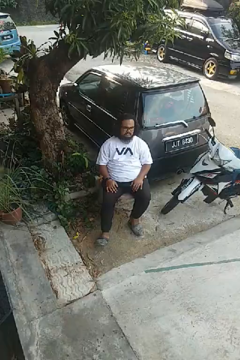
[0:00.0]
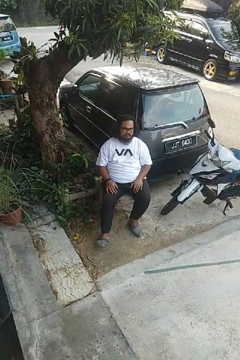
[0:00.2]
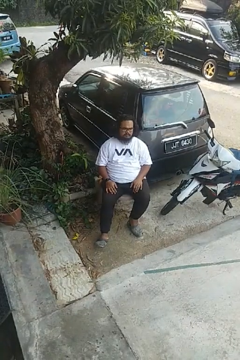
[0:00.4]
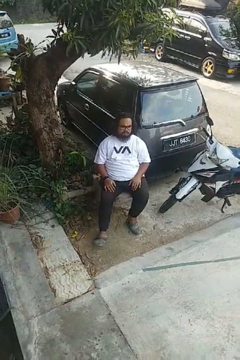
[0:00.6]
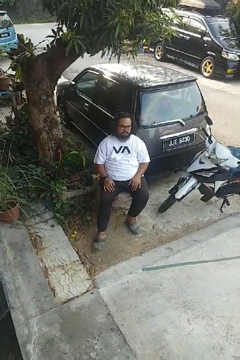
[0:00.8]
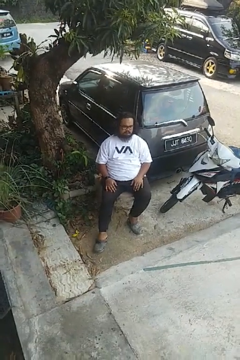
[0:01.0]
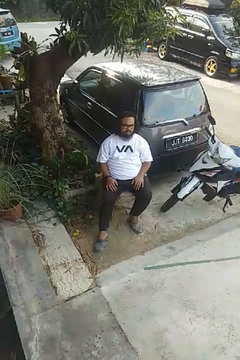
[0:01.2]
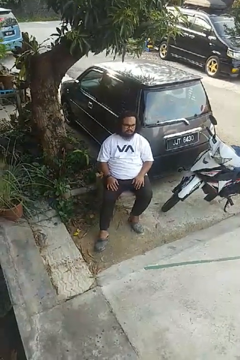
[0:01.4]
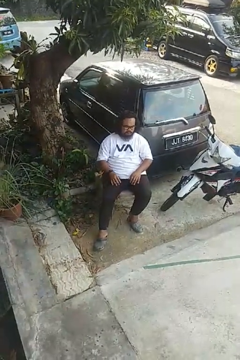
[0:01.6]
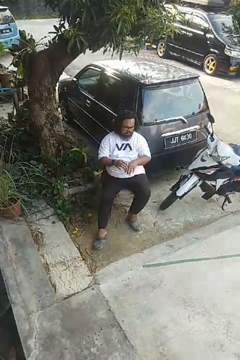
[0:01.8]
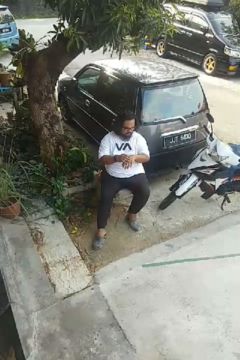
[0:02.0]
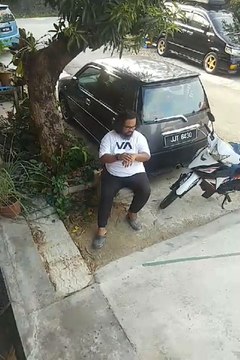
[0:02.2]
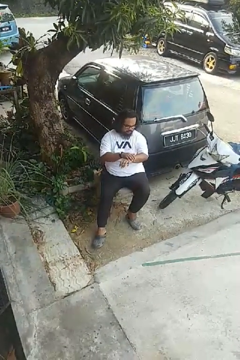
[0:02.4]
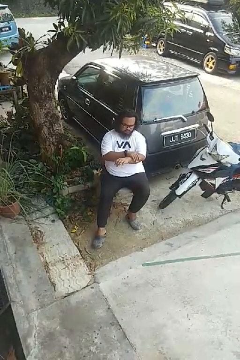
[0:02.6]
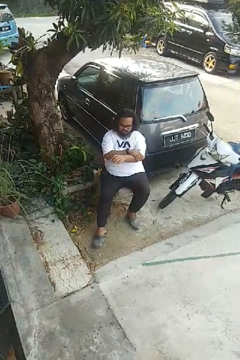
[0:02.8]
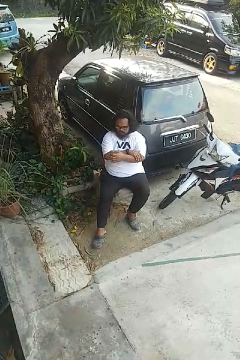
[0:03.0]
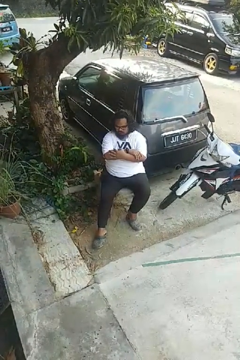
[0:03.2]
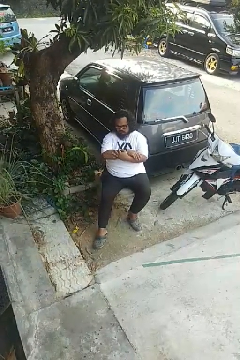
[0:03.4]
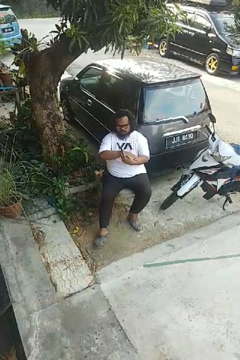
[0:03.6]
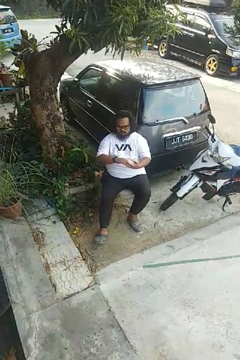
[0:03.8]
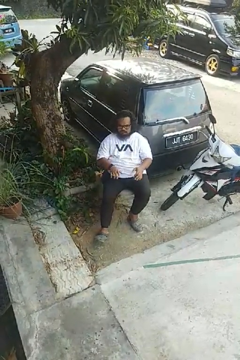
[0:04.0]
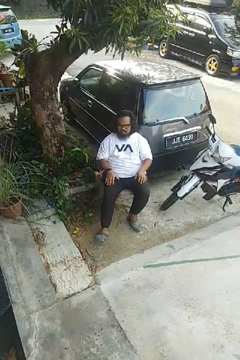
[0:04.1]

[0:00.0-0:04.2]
person looks at hands in lap

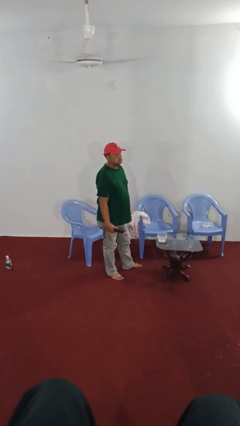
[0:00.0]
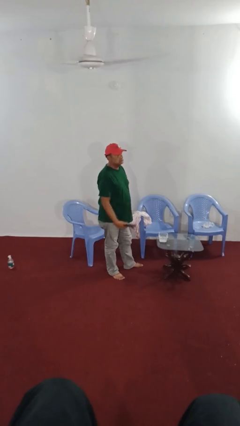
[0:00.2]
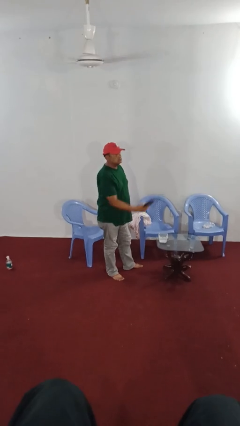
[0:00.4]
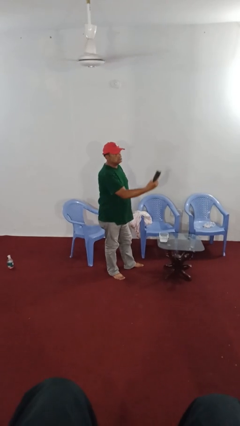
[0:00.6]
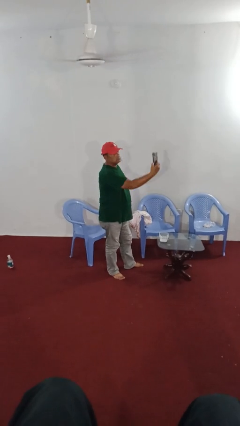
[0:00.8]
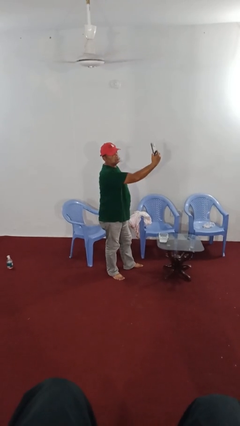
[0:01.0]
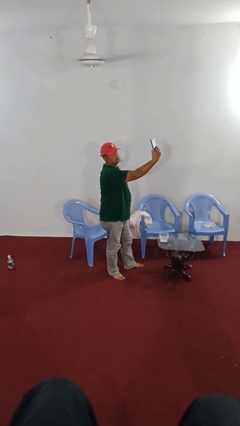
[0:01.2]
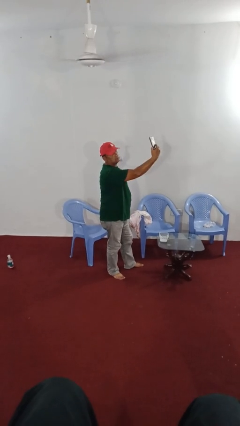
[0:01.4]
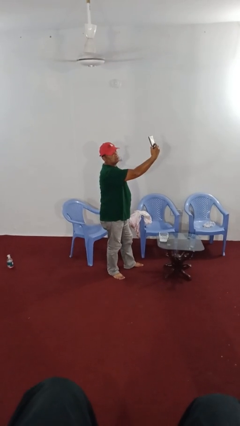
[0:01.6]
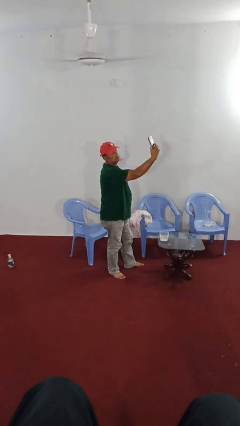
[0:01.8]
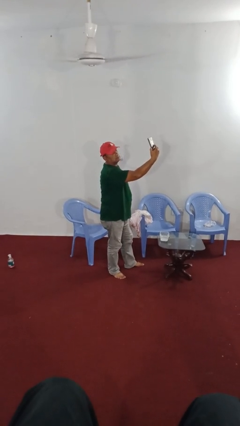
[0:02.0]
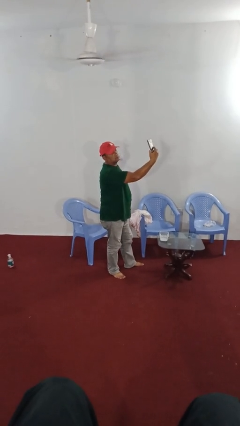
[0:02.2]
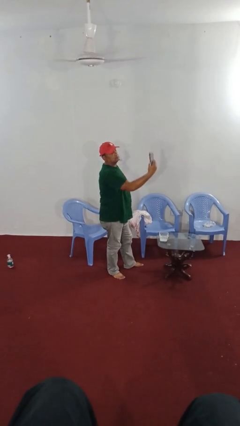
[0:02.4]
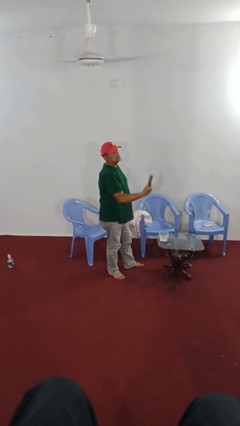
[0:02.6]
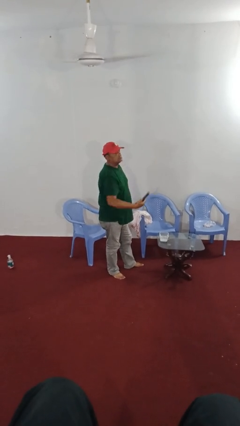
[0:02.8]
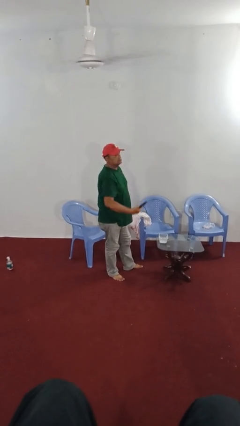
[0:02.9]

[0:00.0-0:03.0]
person takes selfie

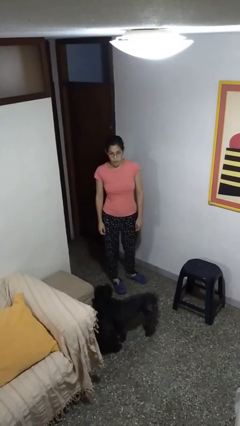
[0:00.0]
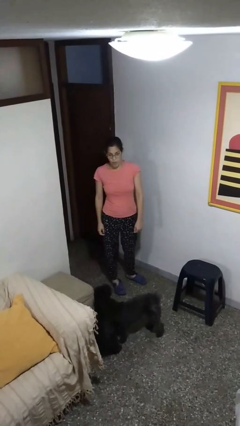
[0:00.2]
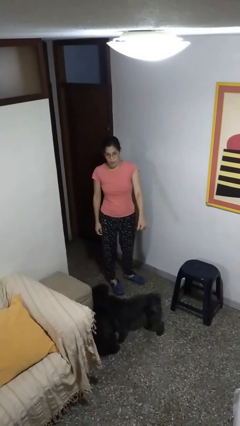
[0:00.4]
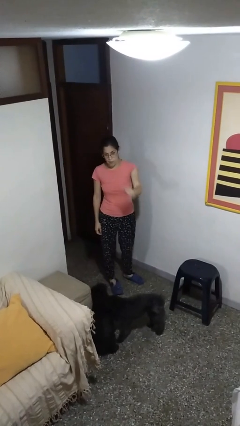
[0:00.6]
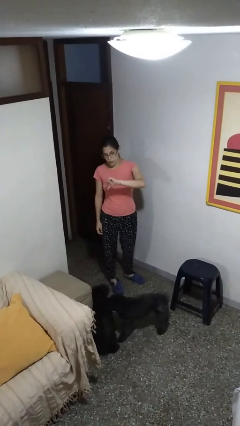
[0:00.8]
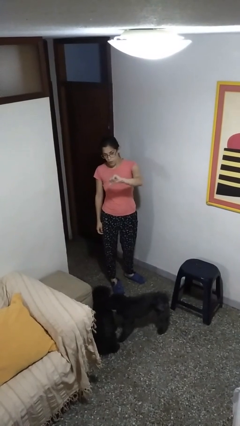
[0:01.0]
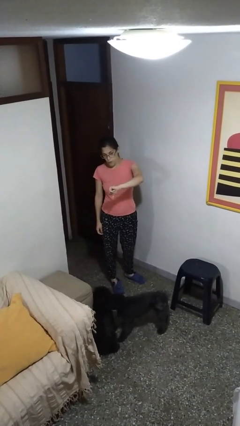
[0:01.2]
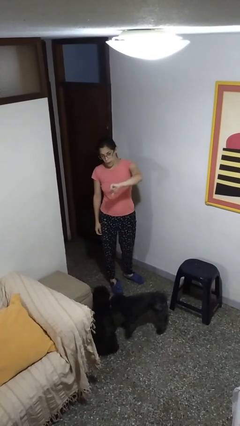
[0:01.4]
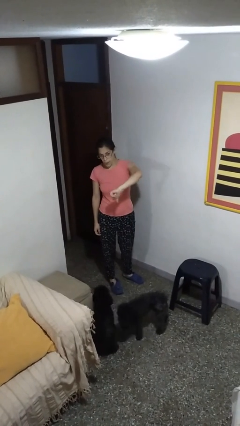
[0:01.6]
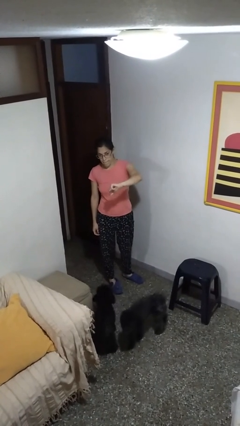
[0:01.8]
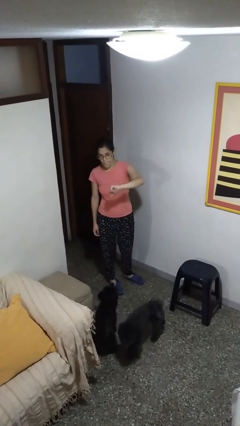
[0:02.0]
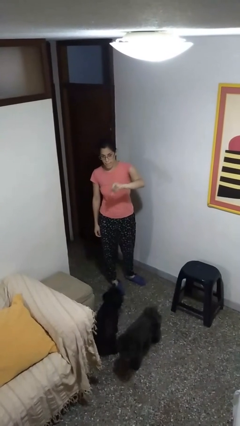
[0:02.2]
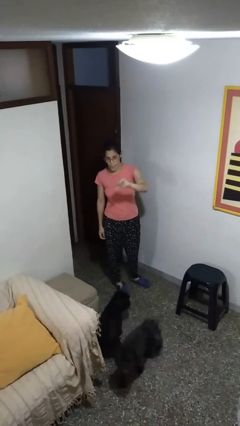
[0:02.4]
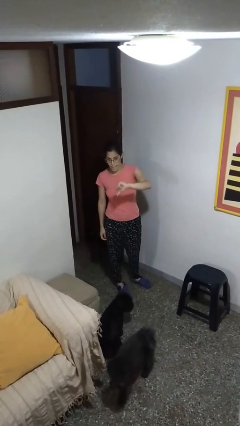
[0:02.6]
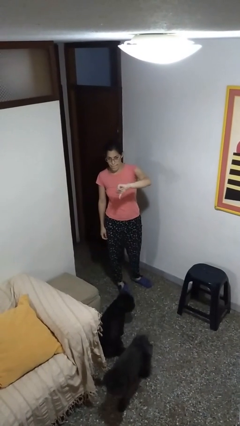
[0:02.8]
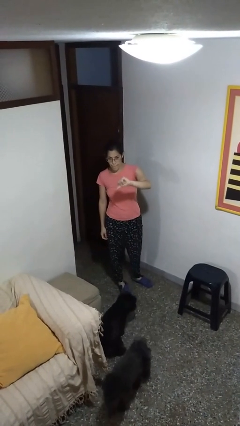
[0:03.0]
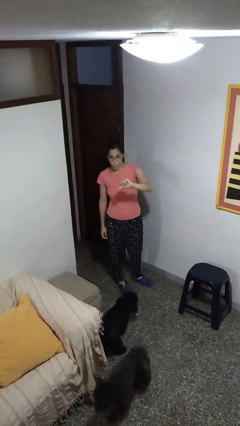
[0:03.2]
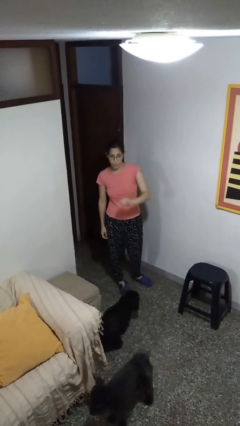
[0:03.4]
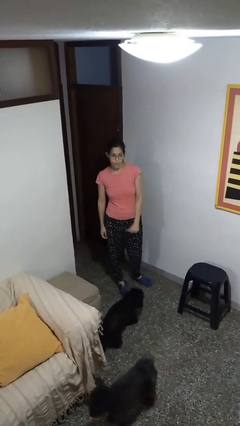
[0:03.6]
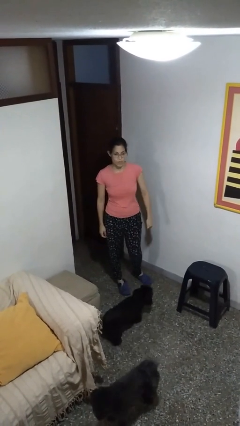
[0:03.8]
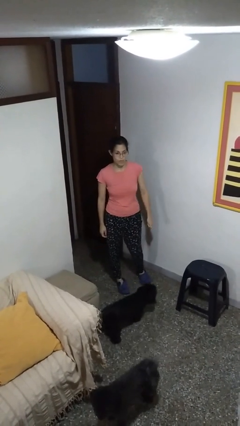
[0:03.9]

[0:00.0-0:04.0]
person gestures thumbs down

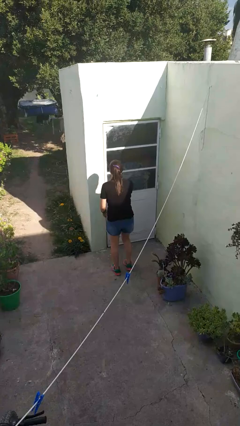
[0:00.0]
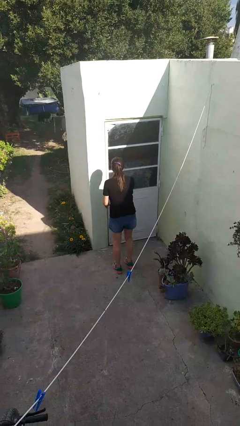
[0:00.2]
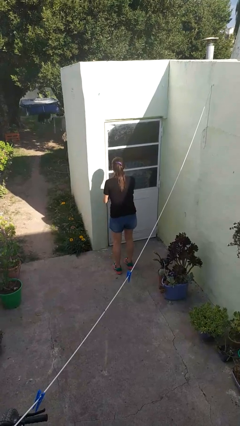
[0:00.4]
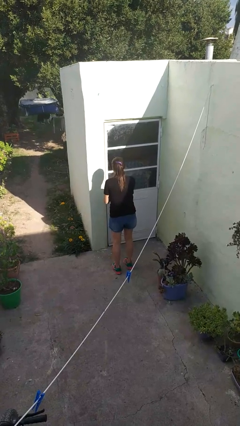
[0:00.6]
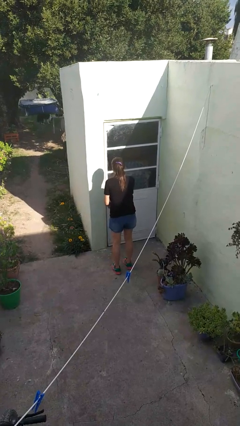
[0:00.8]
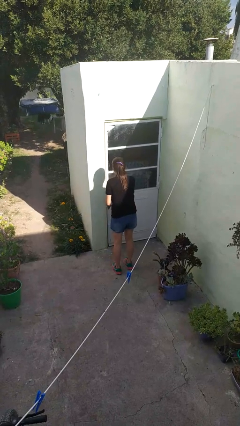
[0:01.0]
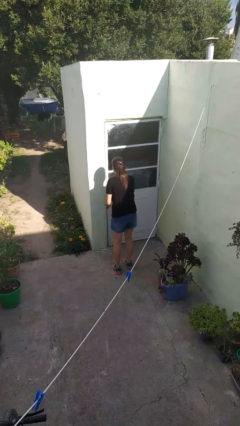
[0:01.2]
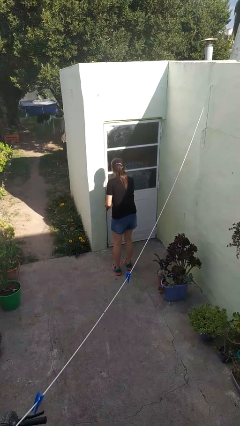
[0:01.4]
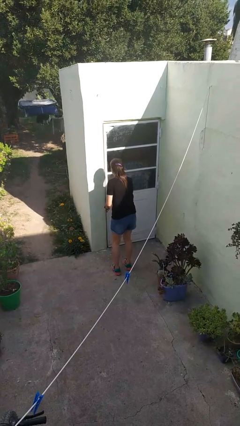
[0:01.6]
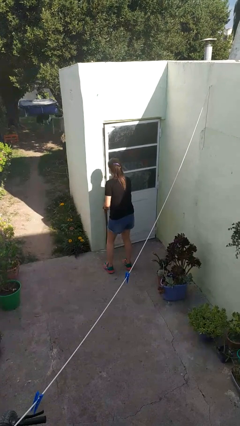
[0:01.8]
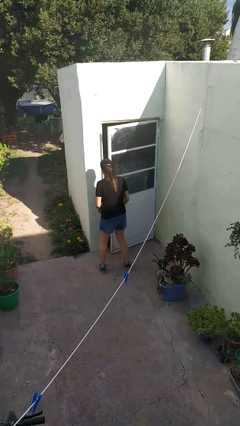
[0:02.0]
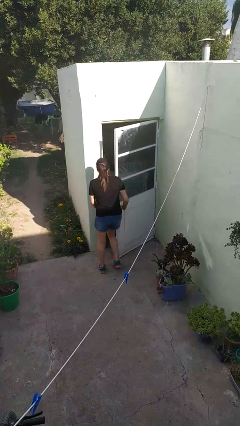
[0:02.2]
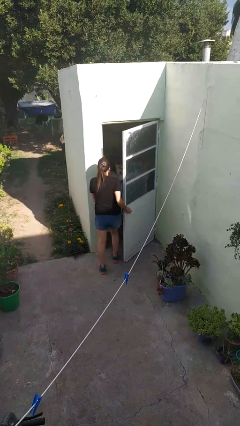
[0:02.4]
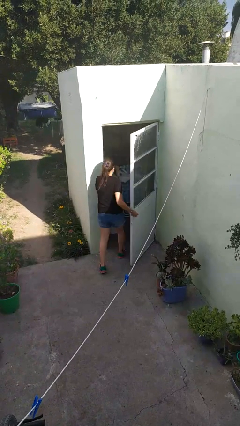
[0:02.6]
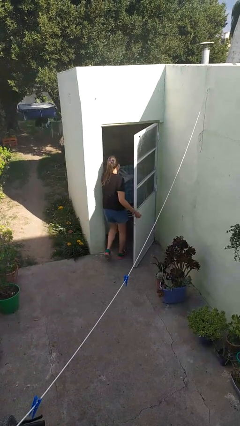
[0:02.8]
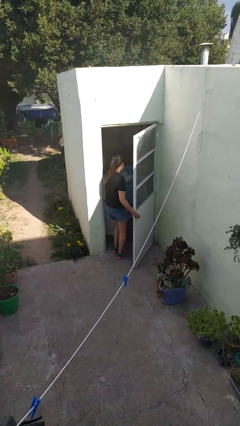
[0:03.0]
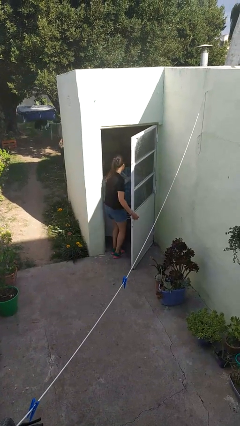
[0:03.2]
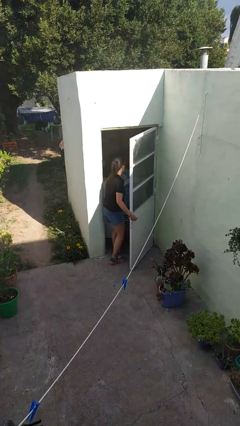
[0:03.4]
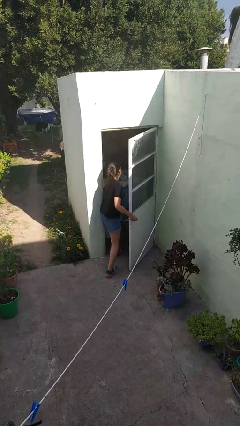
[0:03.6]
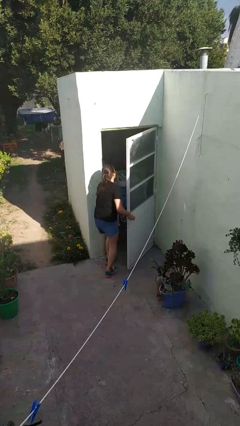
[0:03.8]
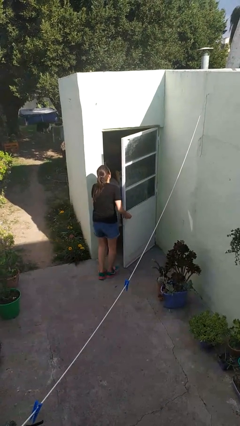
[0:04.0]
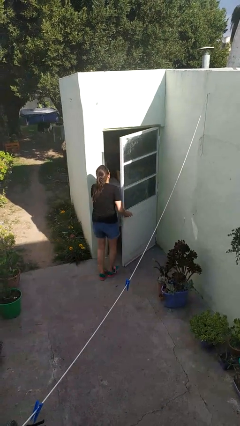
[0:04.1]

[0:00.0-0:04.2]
person opens facility door

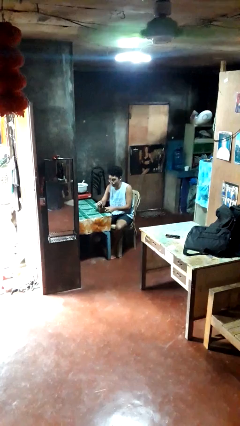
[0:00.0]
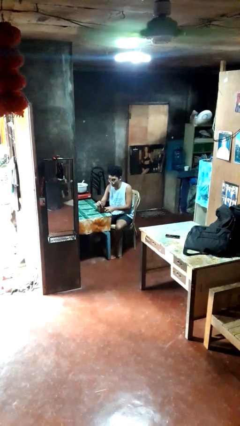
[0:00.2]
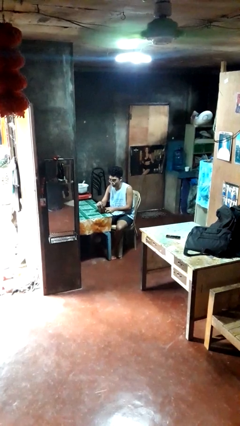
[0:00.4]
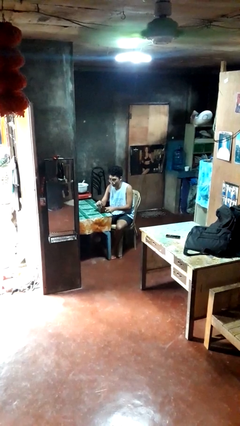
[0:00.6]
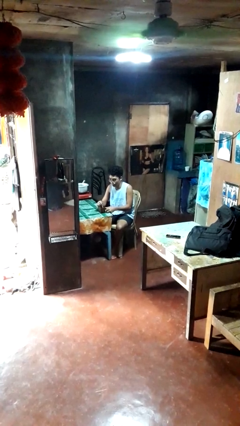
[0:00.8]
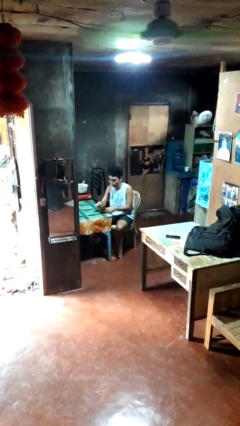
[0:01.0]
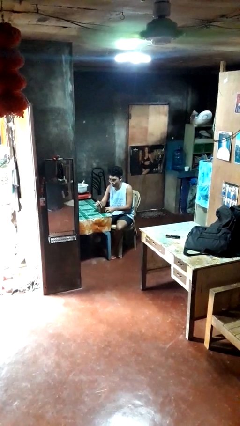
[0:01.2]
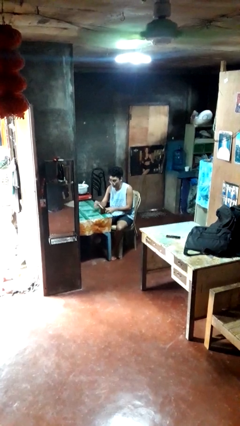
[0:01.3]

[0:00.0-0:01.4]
person stirs mug

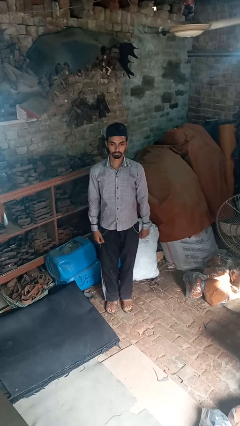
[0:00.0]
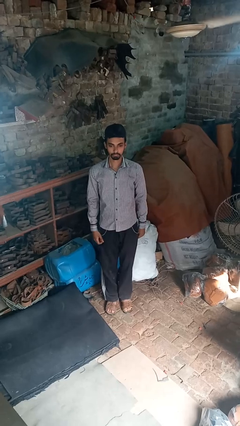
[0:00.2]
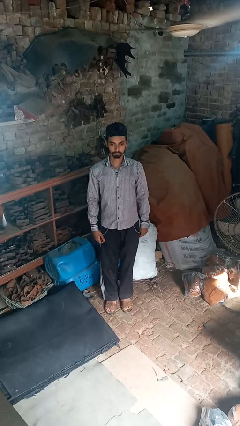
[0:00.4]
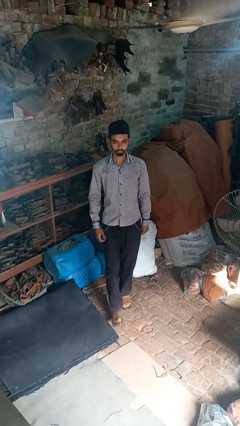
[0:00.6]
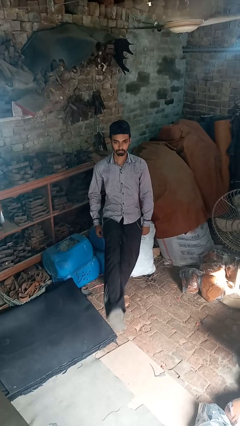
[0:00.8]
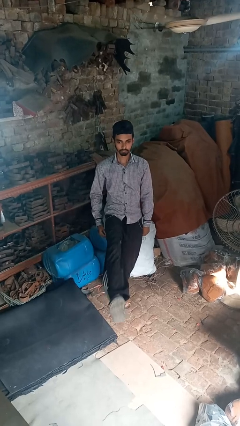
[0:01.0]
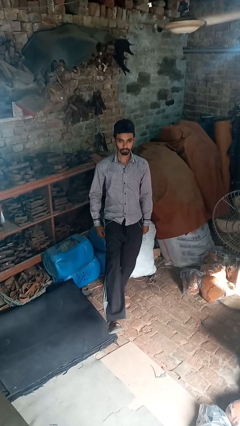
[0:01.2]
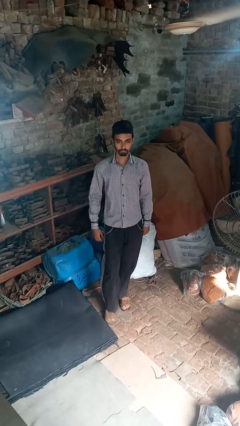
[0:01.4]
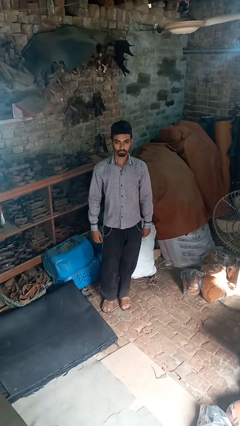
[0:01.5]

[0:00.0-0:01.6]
person karate kicks
